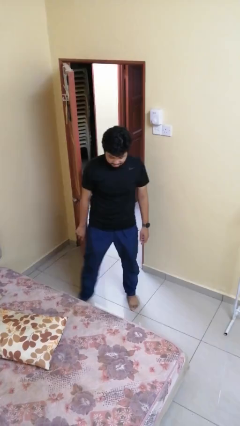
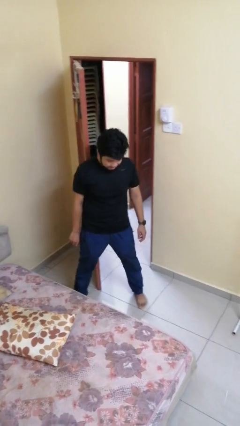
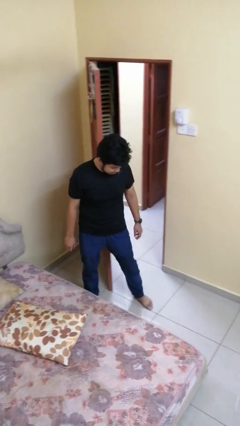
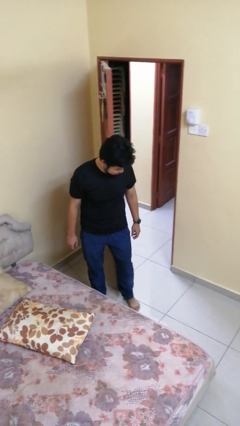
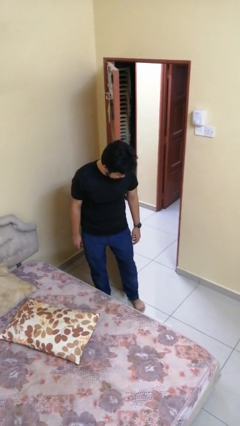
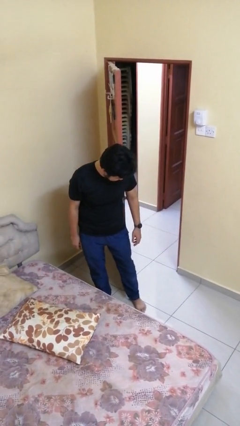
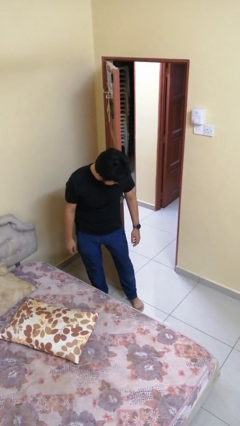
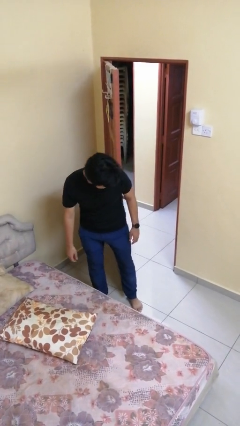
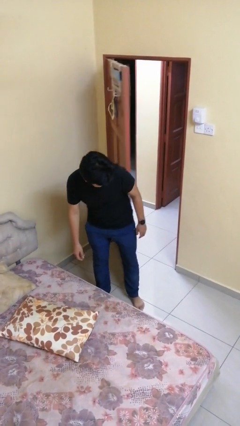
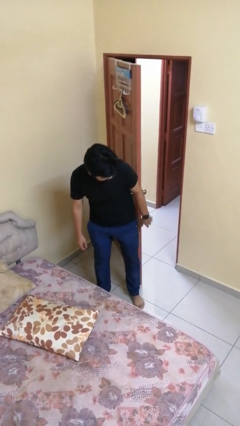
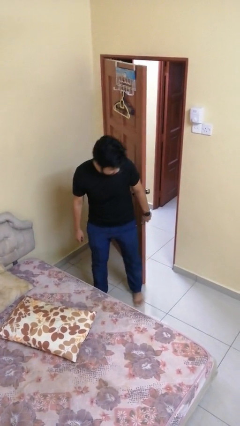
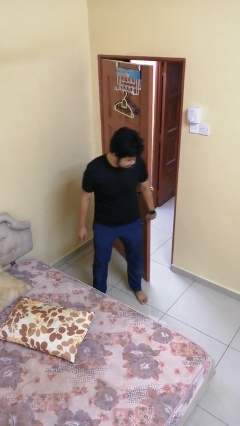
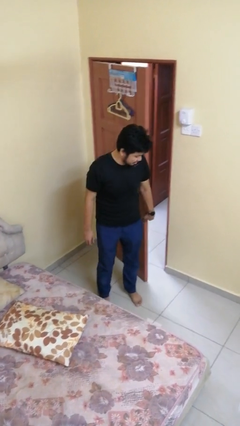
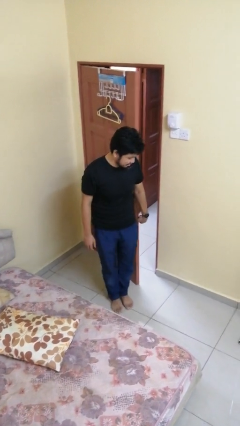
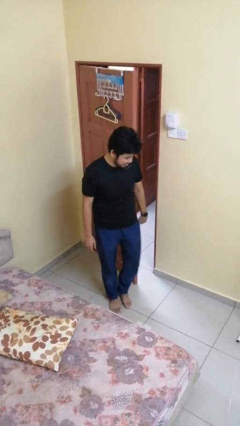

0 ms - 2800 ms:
person closes door with hip

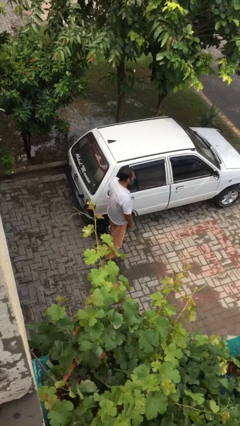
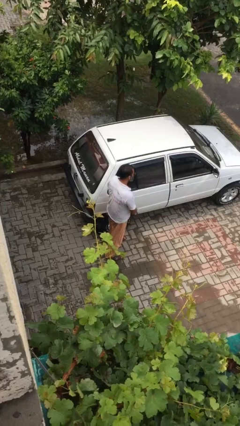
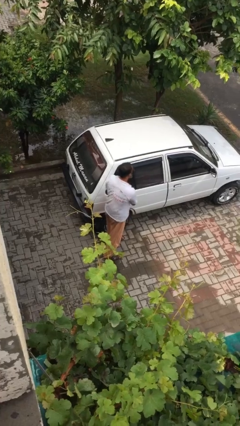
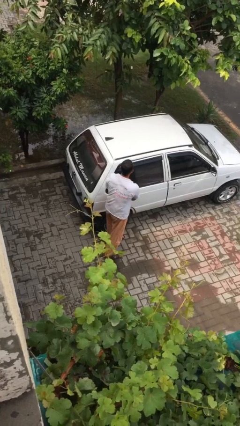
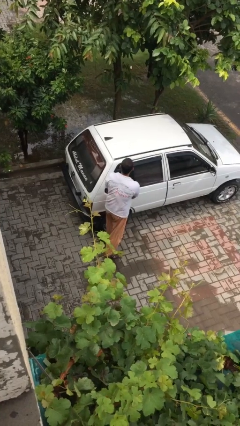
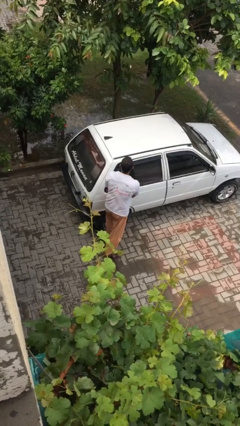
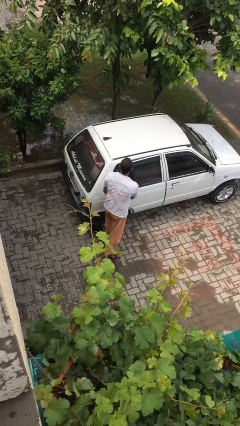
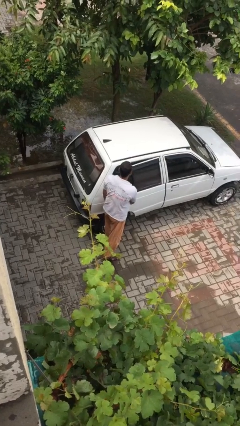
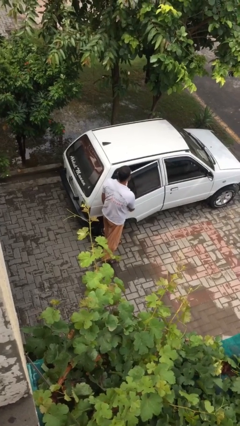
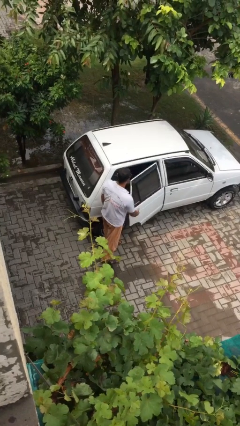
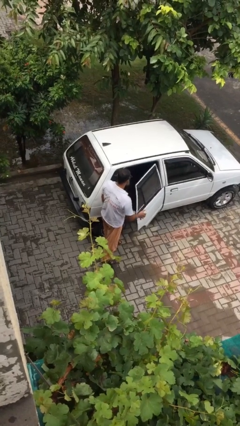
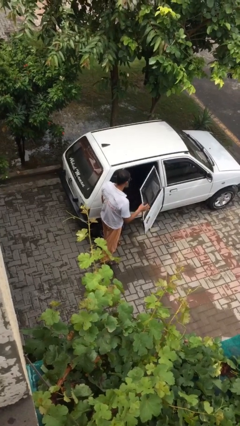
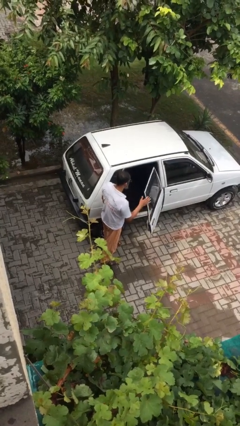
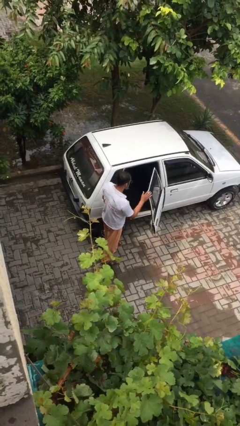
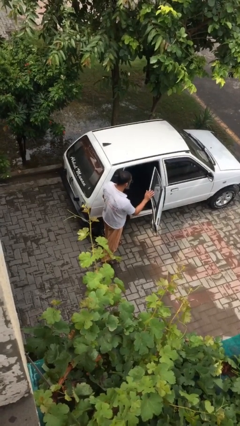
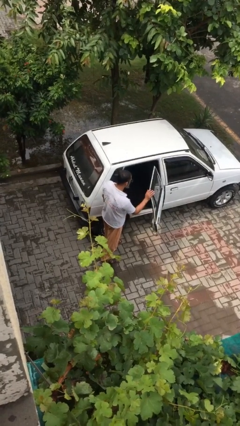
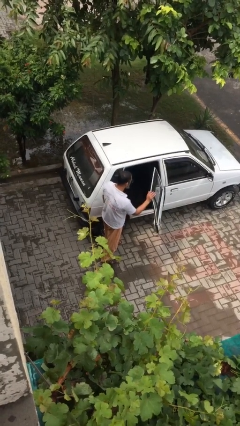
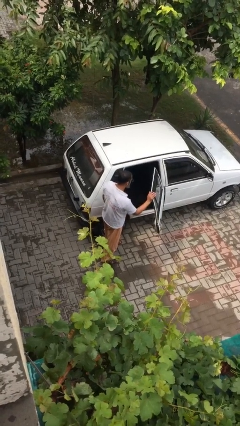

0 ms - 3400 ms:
person opens car door

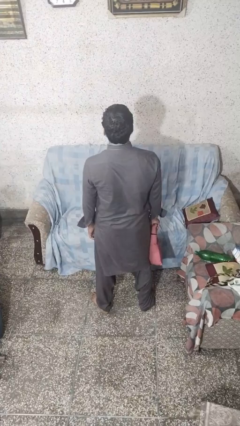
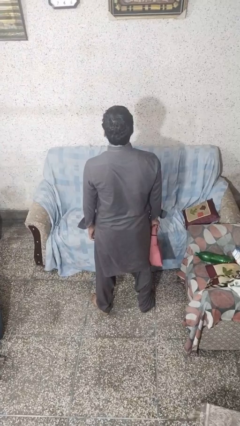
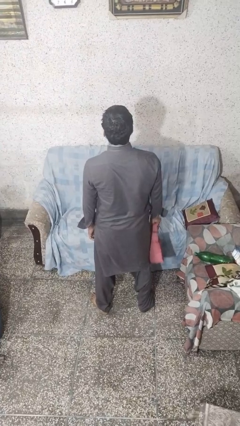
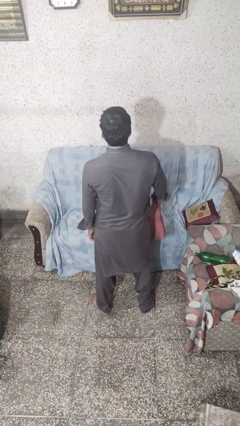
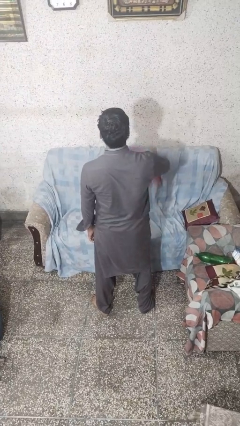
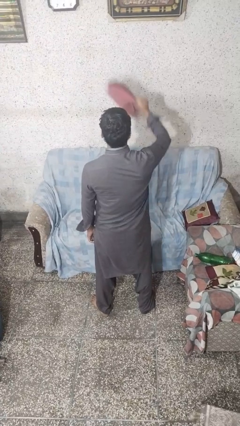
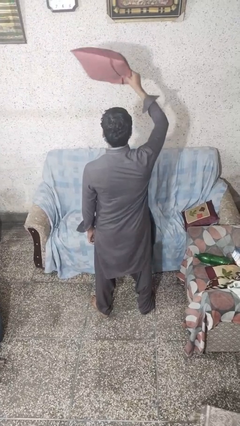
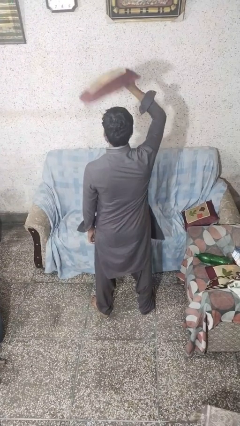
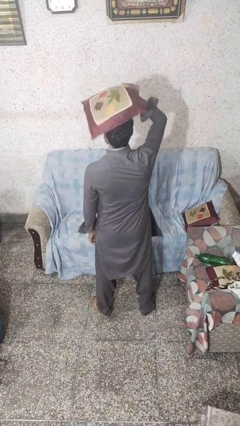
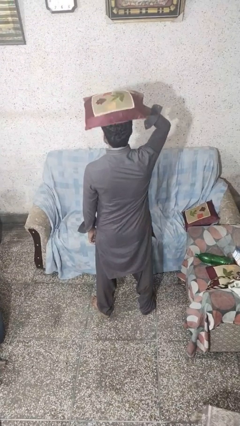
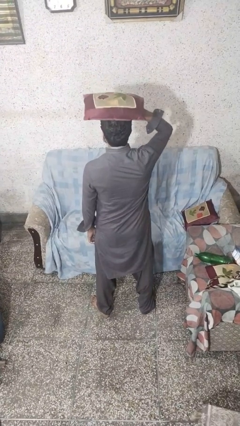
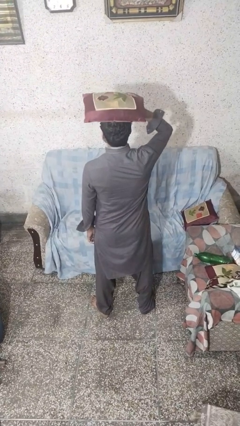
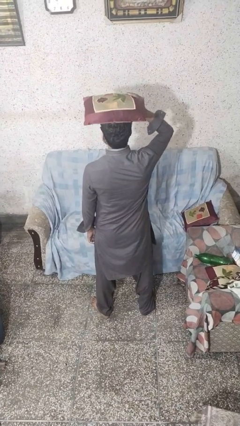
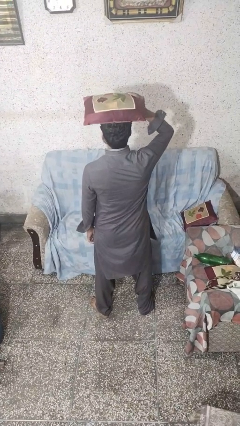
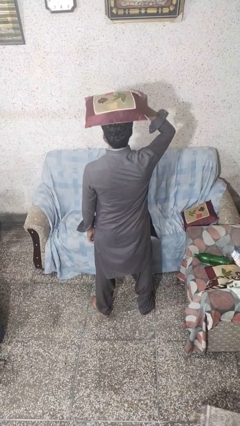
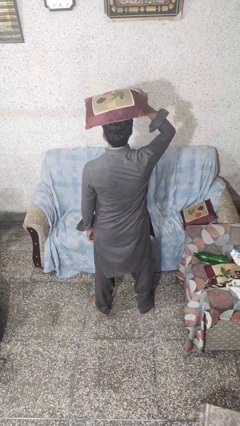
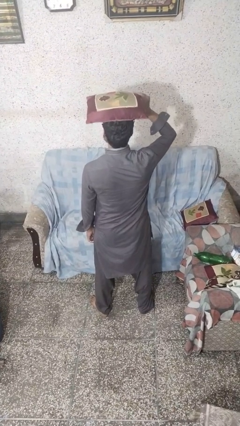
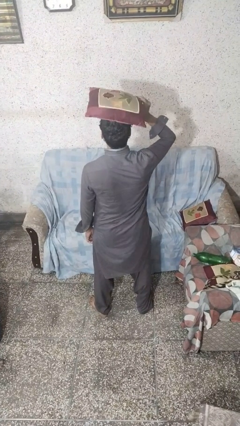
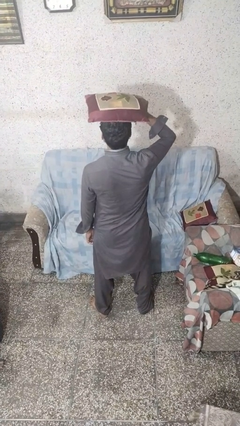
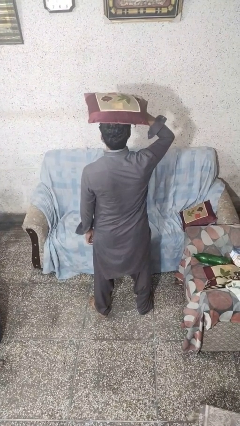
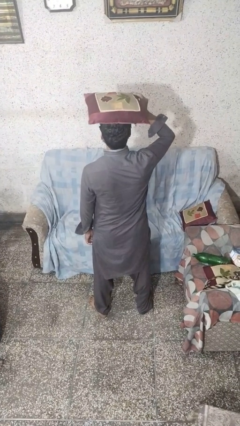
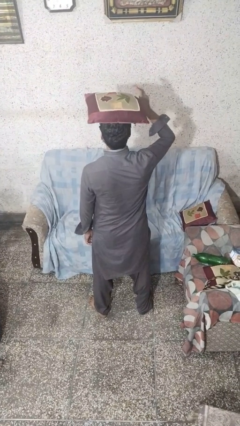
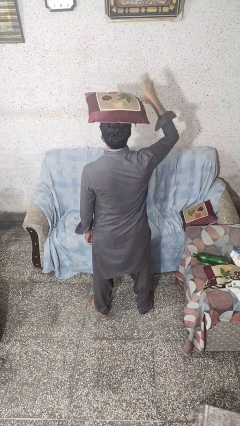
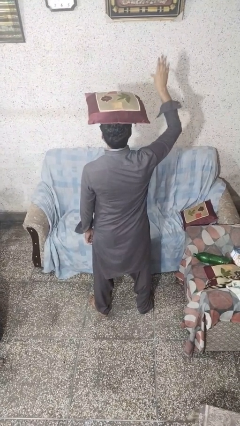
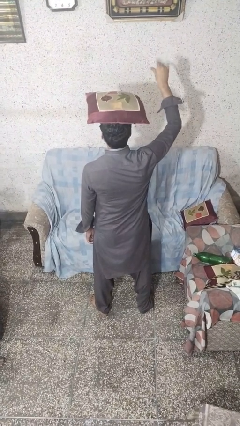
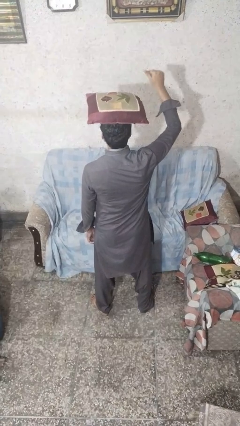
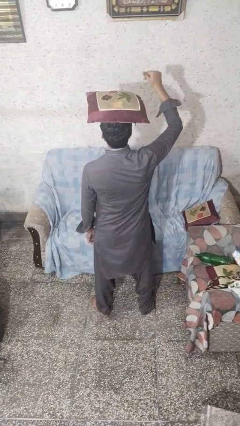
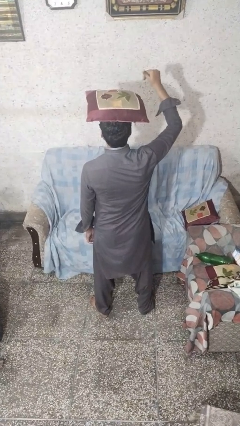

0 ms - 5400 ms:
person holds object above head

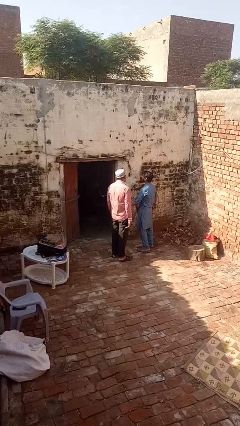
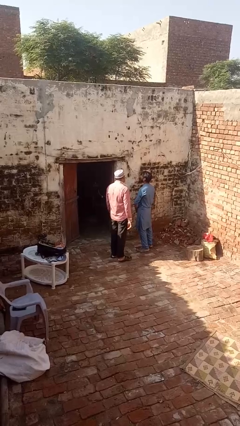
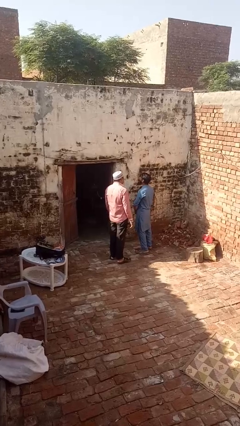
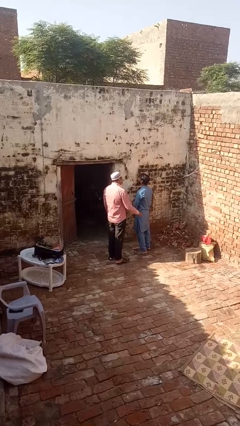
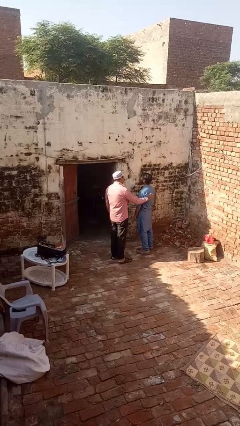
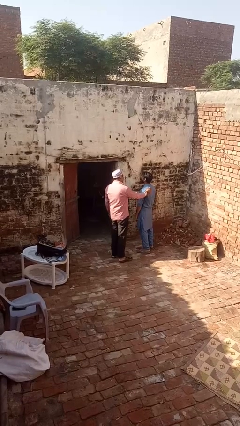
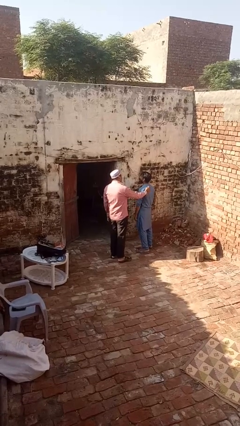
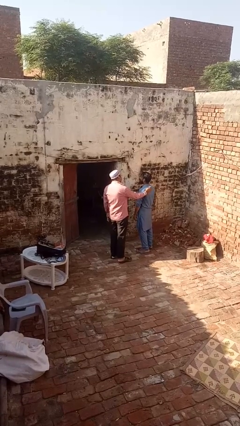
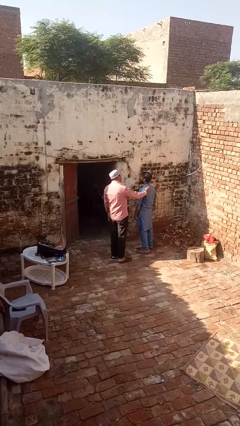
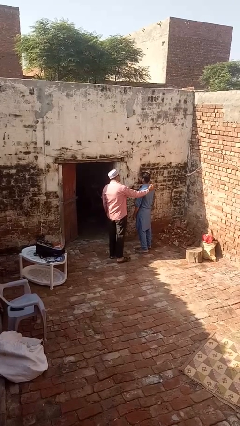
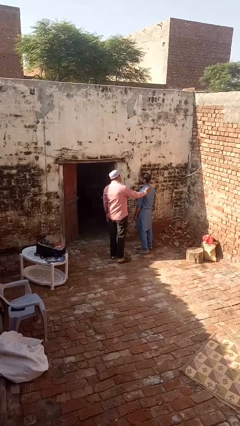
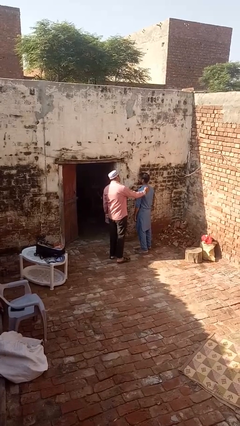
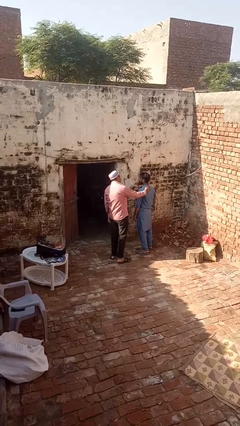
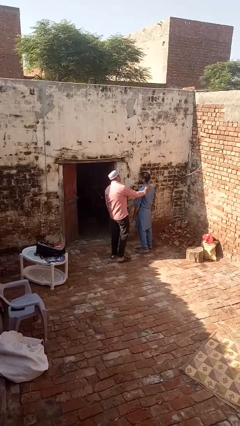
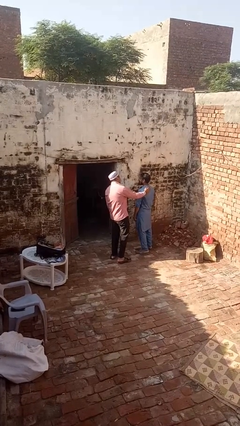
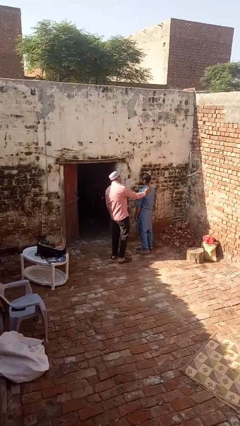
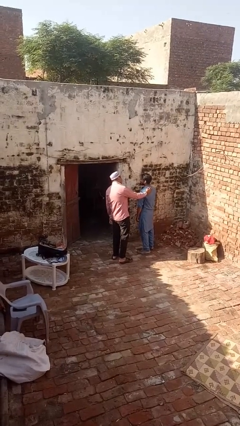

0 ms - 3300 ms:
person laughs with person

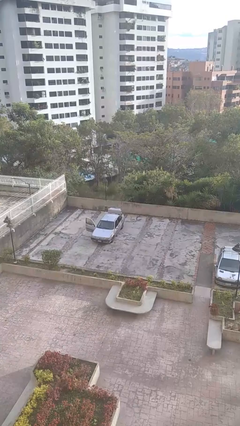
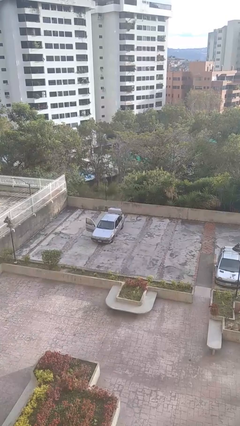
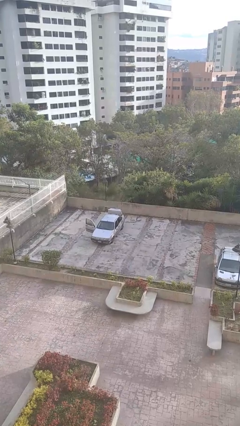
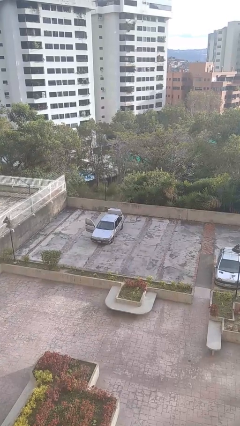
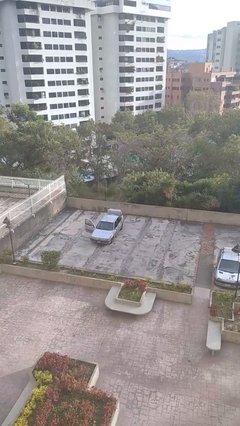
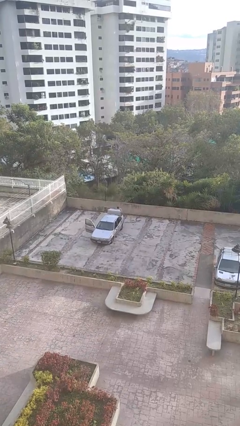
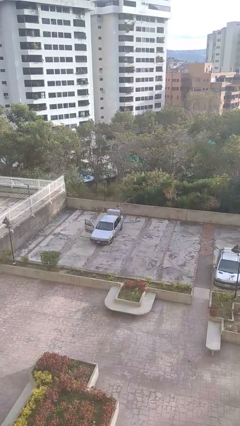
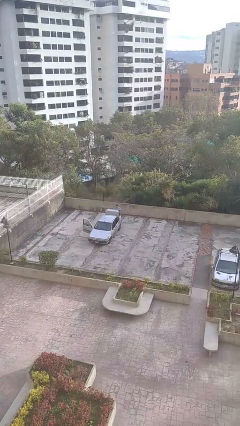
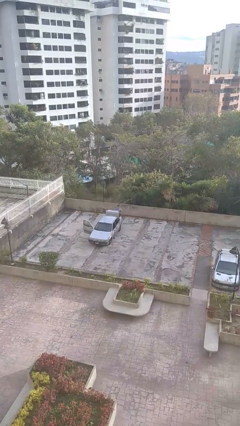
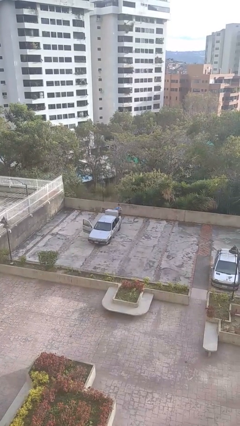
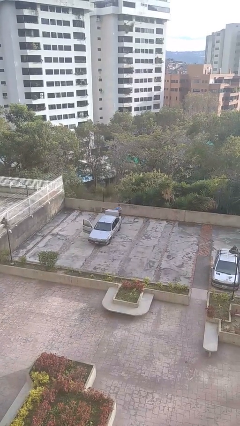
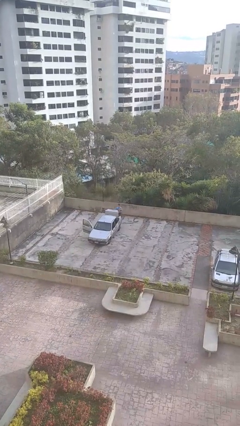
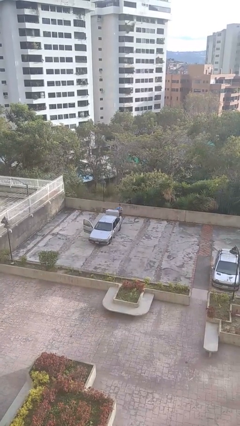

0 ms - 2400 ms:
person unloads car

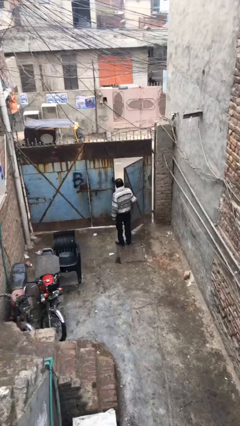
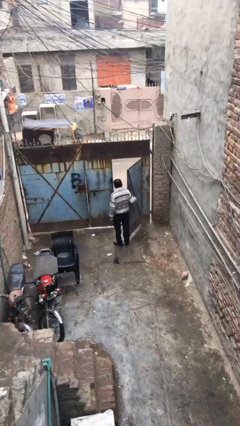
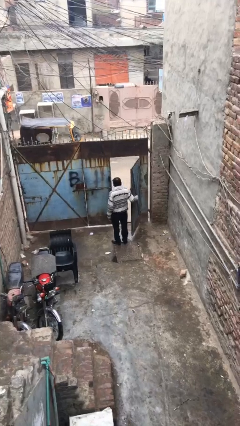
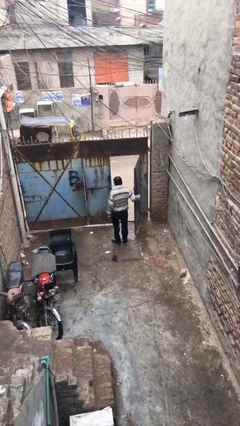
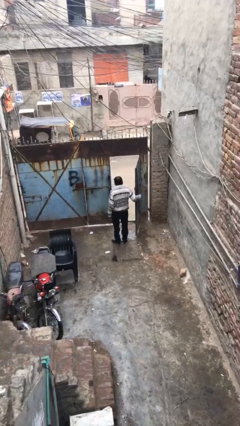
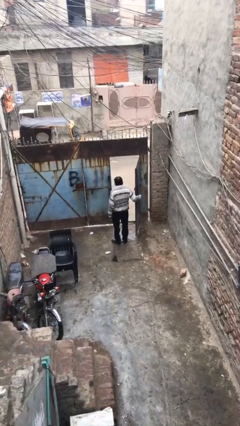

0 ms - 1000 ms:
person opens facility door
